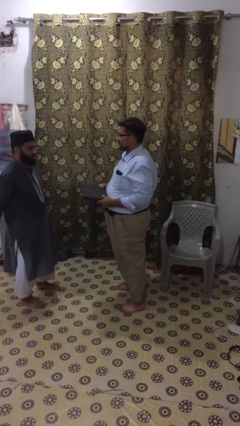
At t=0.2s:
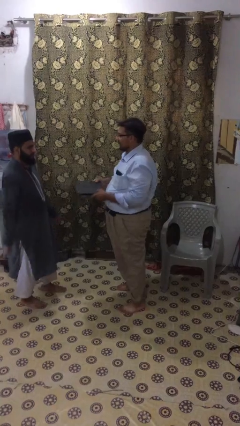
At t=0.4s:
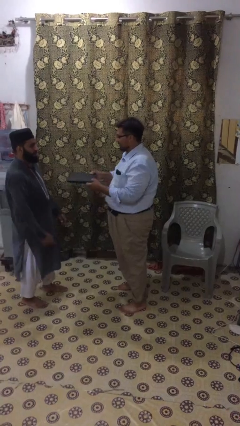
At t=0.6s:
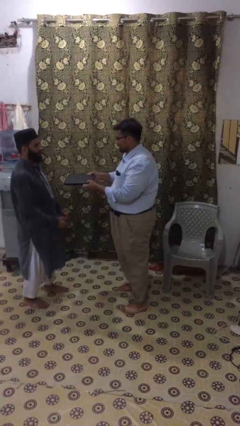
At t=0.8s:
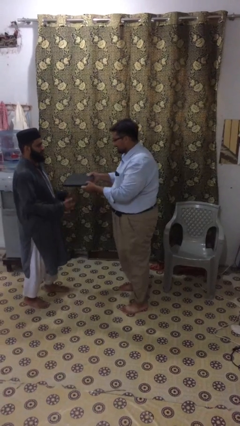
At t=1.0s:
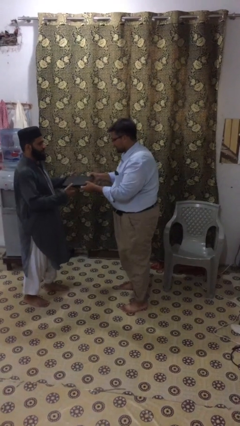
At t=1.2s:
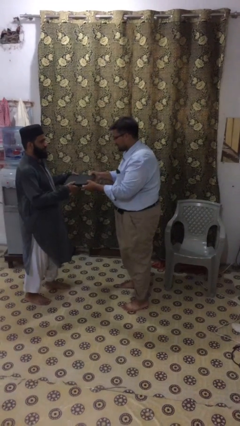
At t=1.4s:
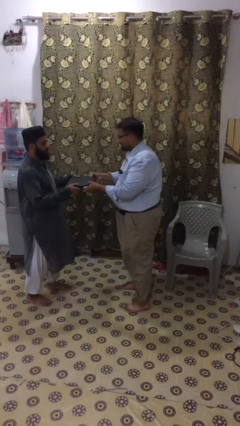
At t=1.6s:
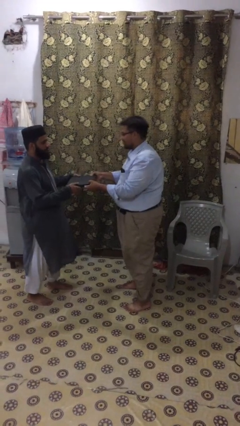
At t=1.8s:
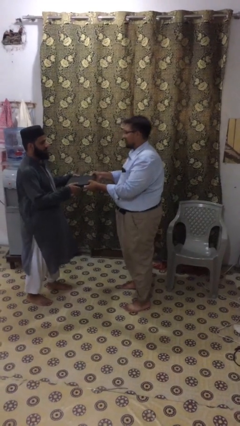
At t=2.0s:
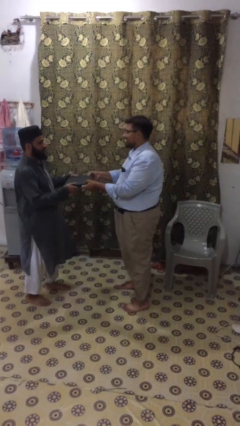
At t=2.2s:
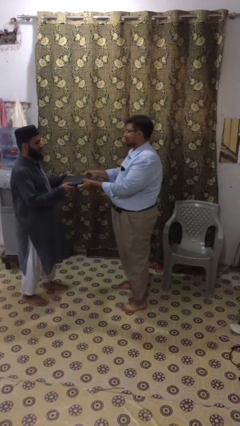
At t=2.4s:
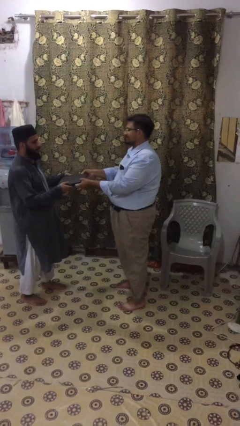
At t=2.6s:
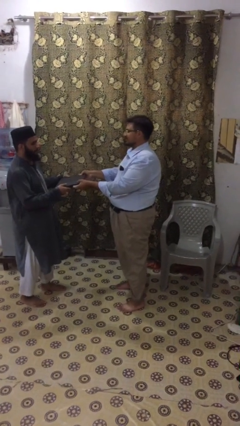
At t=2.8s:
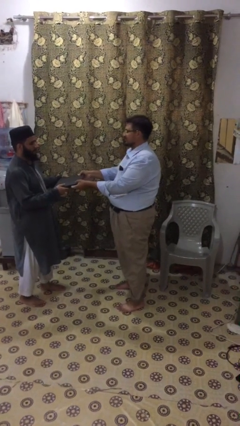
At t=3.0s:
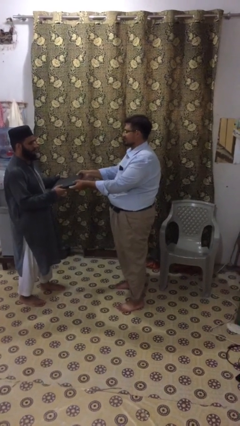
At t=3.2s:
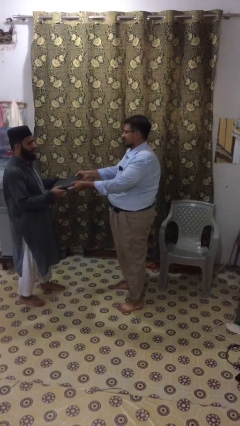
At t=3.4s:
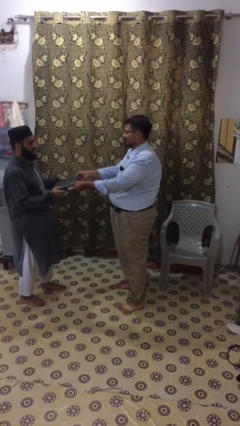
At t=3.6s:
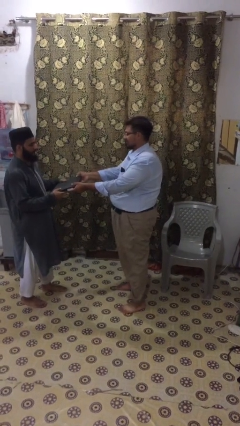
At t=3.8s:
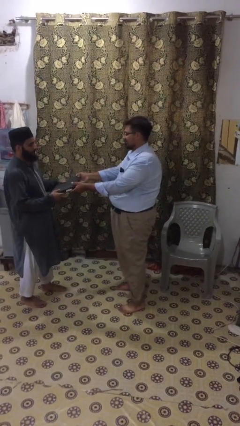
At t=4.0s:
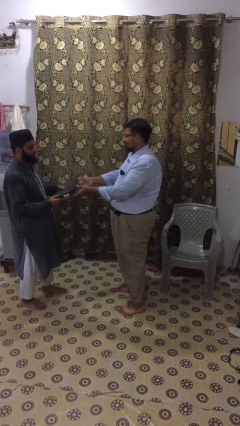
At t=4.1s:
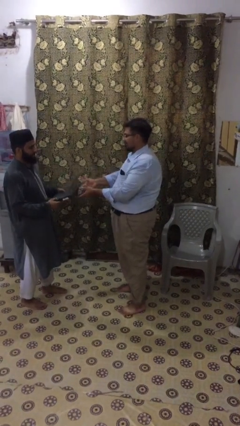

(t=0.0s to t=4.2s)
person transfers object to person

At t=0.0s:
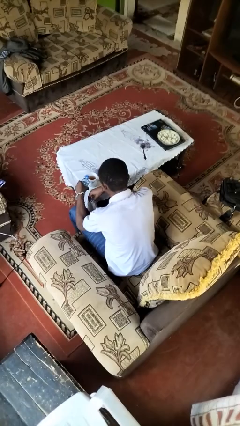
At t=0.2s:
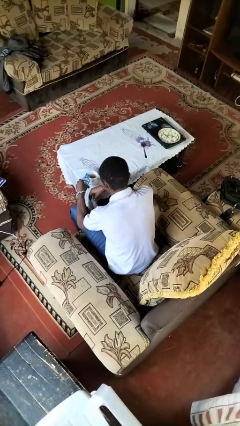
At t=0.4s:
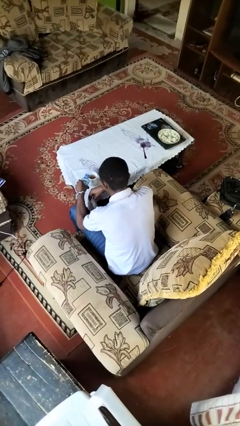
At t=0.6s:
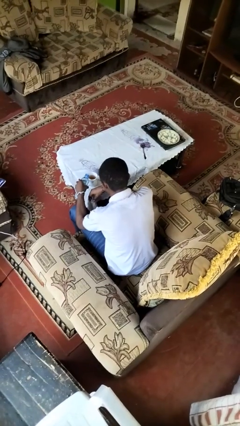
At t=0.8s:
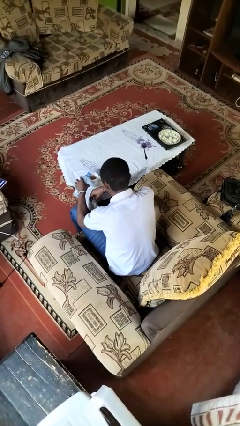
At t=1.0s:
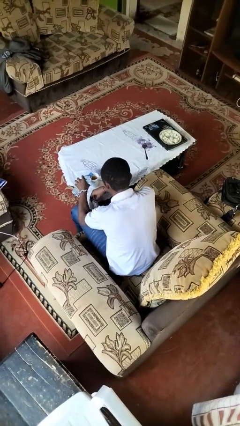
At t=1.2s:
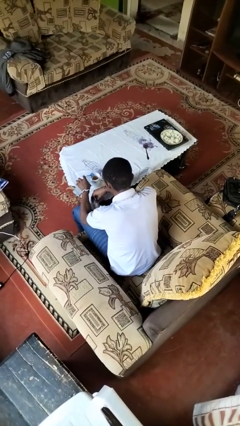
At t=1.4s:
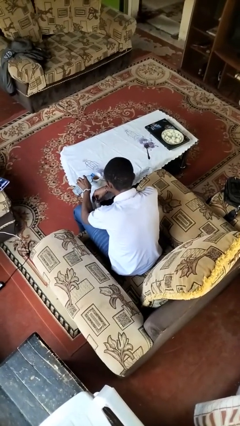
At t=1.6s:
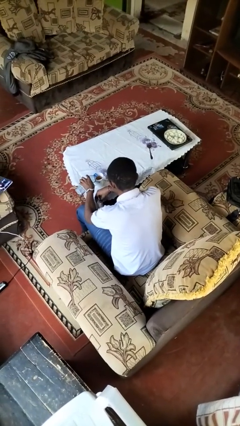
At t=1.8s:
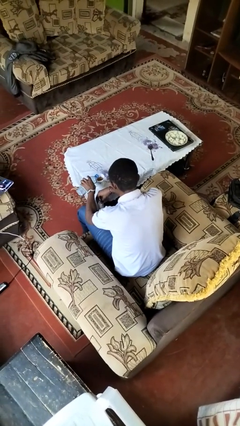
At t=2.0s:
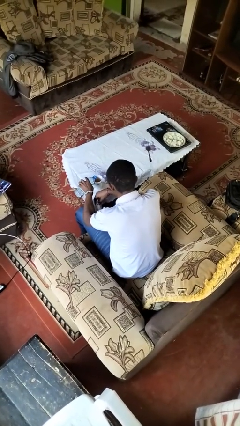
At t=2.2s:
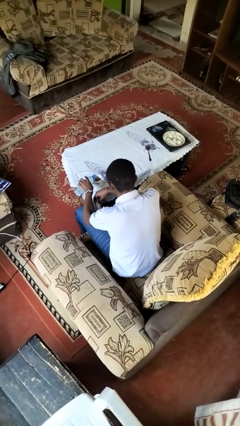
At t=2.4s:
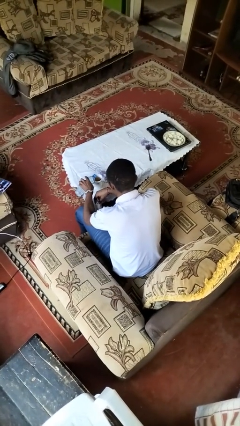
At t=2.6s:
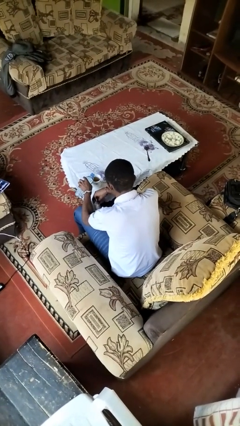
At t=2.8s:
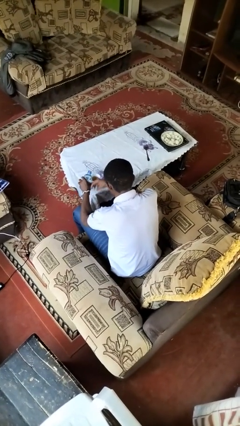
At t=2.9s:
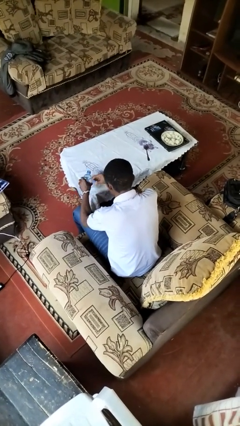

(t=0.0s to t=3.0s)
person pours liquid into cup

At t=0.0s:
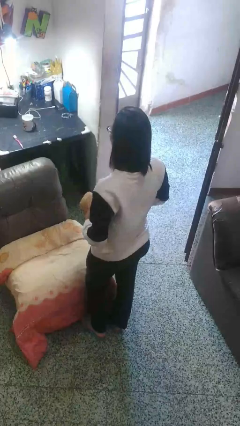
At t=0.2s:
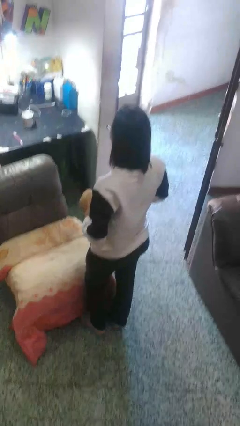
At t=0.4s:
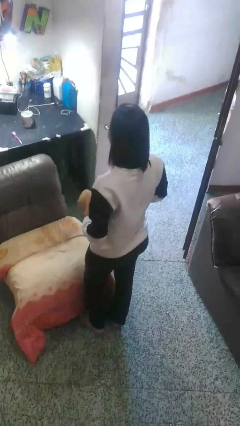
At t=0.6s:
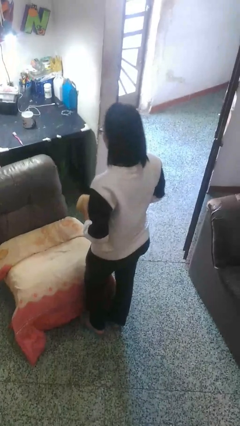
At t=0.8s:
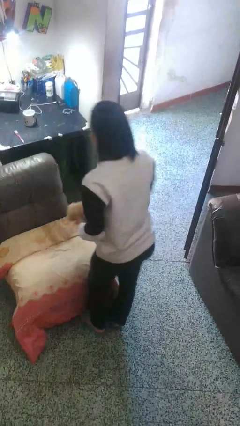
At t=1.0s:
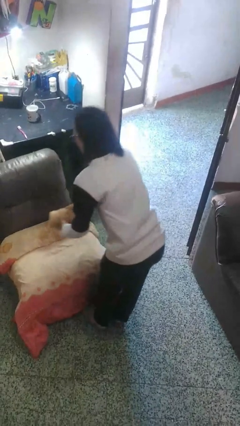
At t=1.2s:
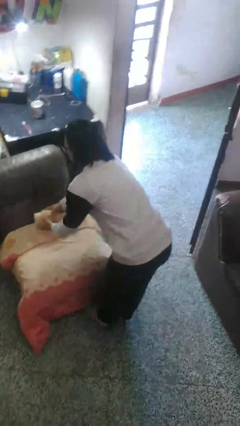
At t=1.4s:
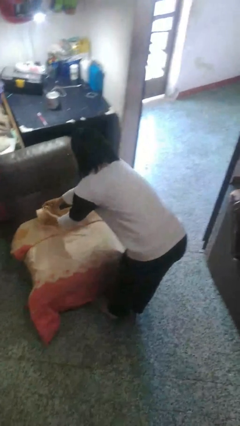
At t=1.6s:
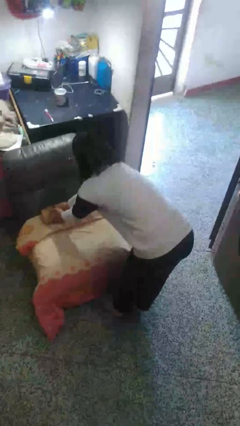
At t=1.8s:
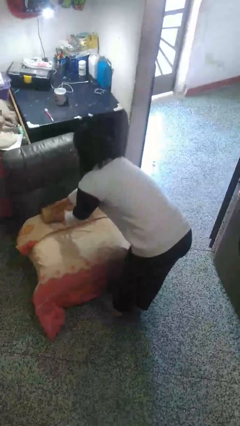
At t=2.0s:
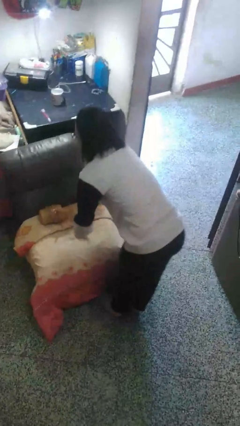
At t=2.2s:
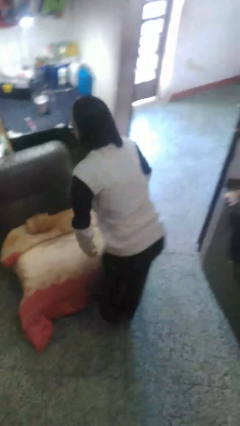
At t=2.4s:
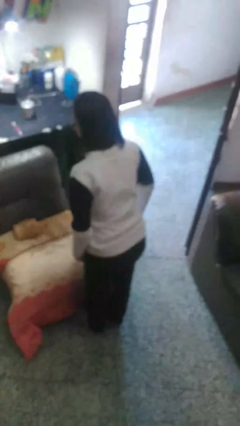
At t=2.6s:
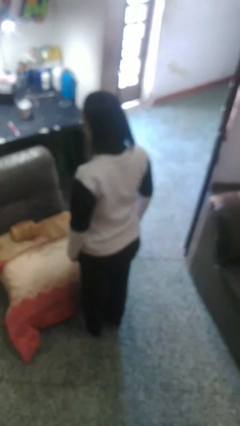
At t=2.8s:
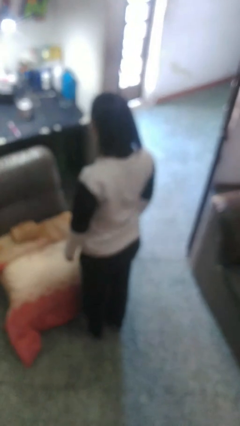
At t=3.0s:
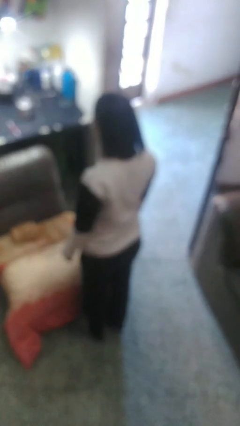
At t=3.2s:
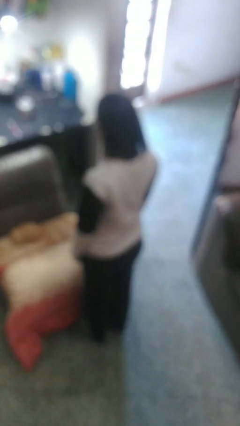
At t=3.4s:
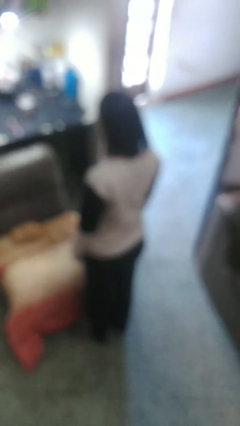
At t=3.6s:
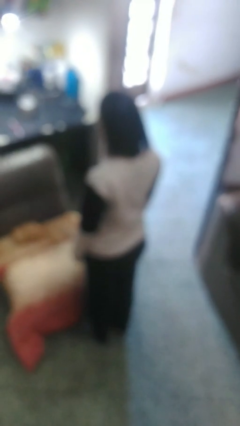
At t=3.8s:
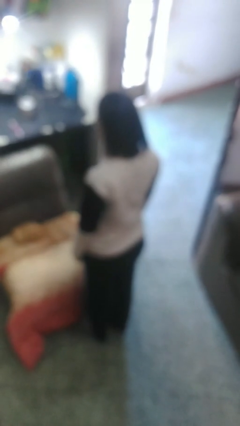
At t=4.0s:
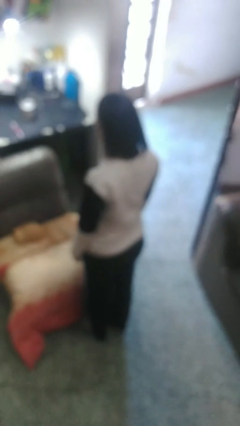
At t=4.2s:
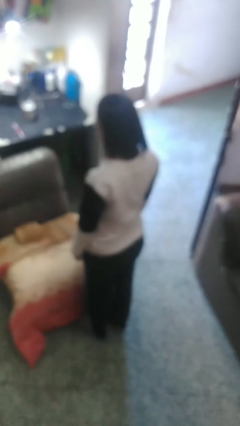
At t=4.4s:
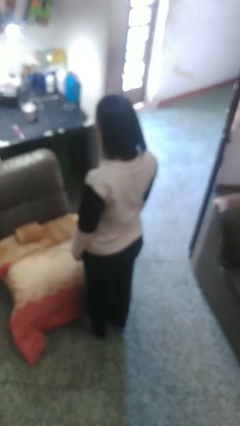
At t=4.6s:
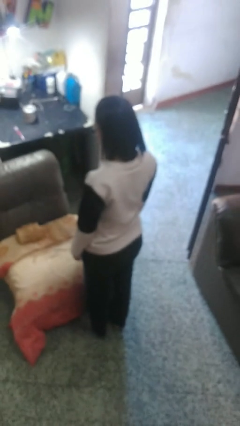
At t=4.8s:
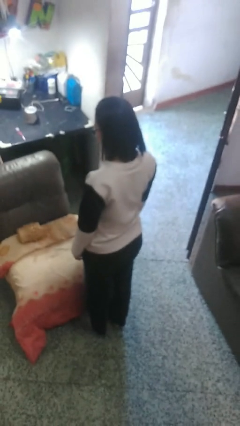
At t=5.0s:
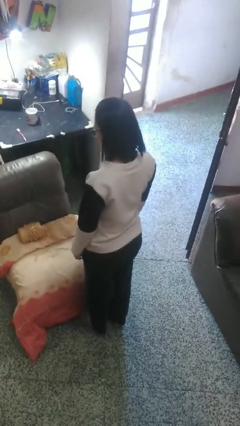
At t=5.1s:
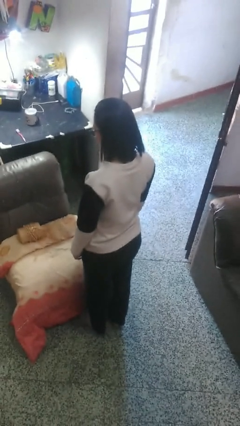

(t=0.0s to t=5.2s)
person puts down object on couch

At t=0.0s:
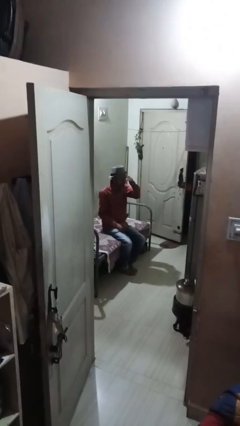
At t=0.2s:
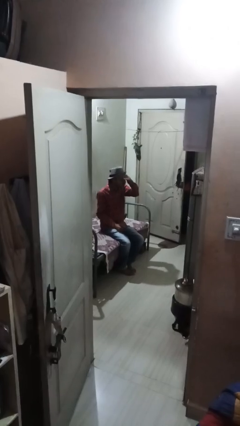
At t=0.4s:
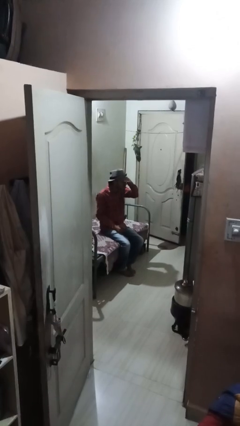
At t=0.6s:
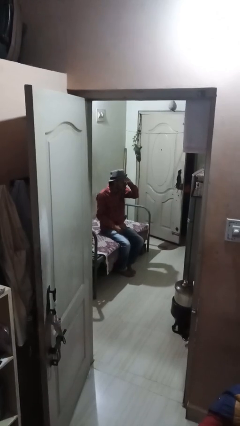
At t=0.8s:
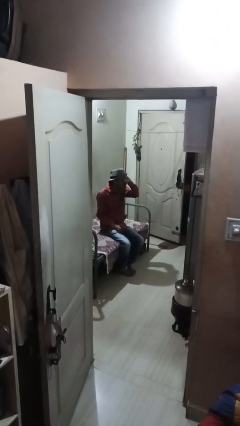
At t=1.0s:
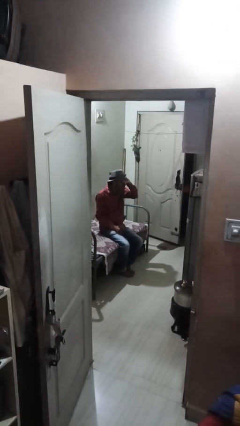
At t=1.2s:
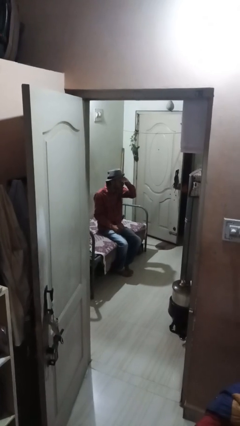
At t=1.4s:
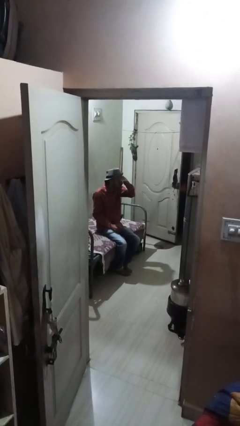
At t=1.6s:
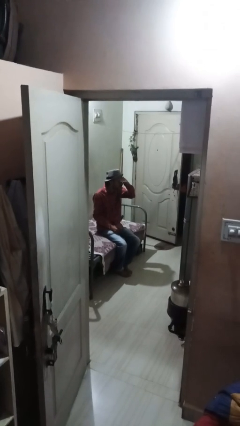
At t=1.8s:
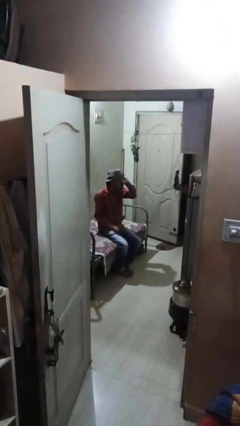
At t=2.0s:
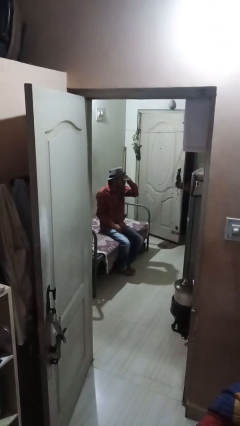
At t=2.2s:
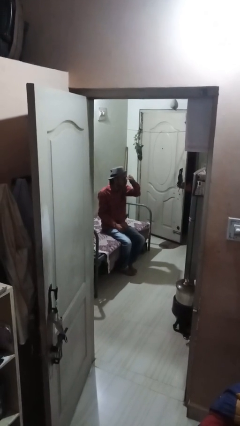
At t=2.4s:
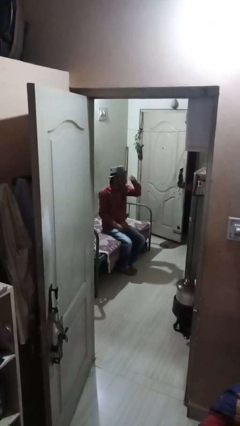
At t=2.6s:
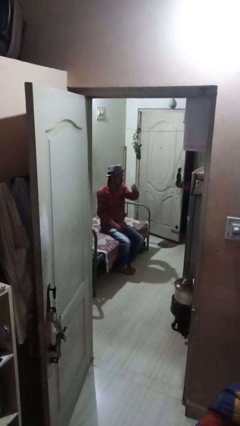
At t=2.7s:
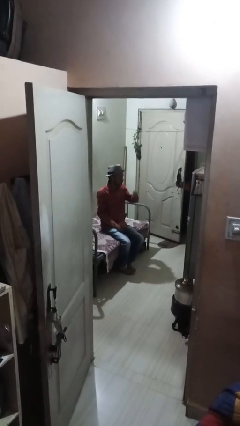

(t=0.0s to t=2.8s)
person shades eyes

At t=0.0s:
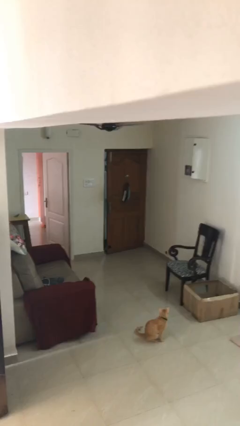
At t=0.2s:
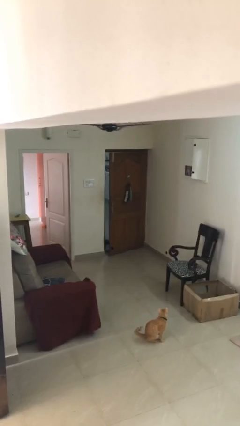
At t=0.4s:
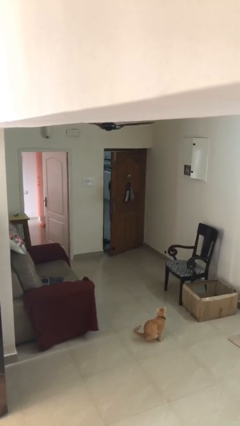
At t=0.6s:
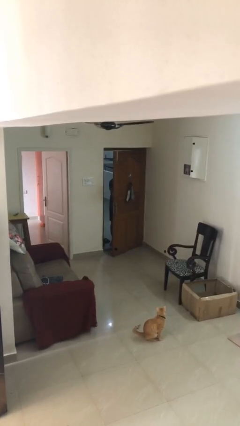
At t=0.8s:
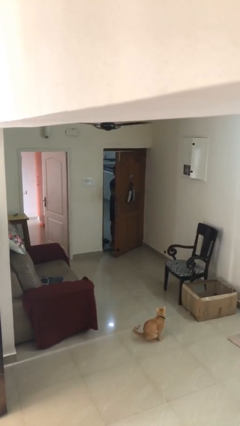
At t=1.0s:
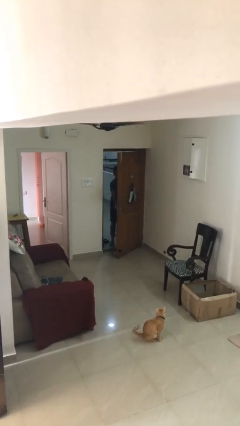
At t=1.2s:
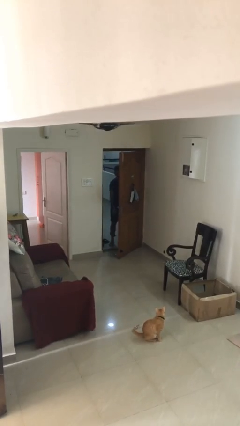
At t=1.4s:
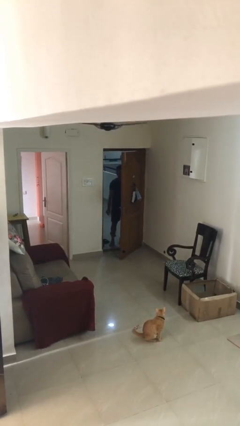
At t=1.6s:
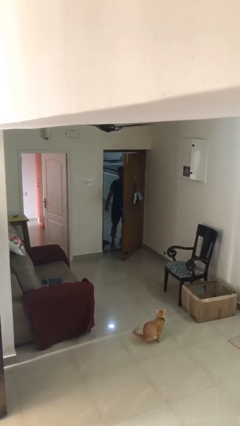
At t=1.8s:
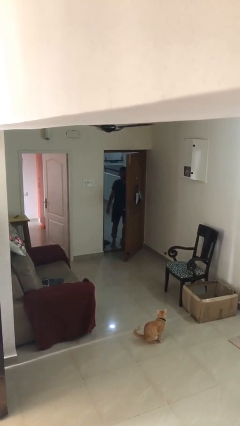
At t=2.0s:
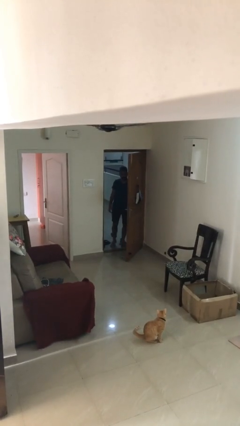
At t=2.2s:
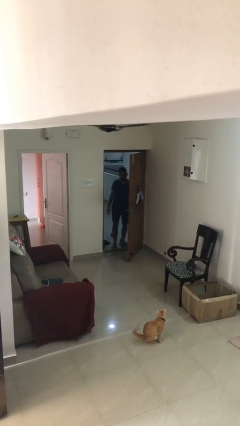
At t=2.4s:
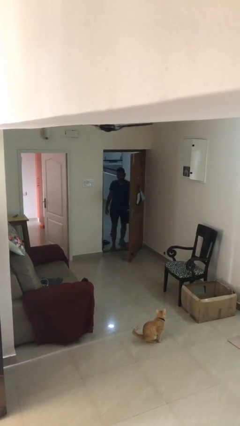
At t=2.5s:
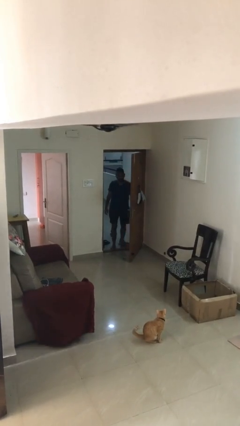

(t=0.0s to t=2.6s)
person opens facility door
